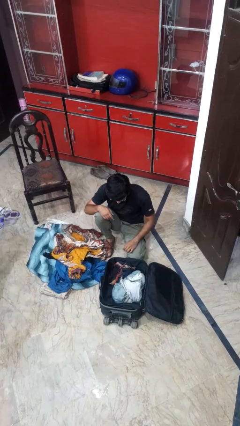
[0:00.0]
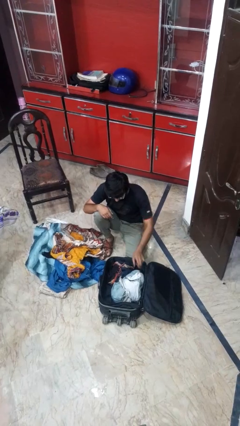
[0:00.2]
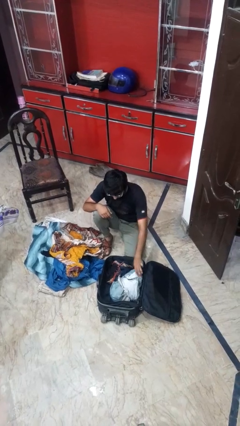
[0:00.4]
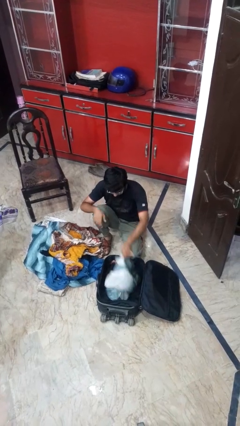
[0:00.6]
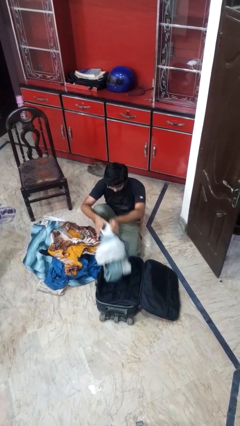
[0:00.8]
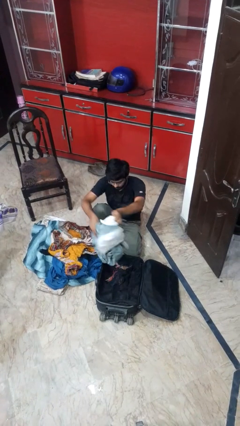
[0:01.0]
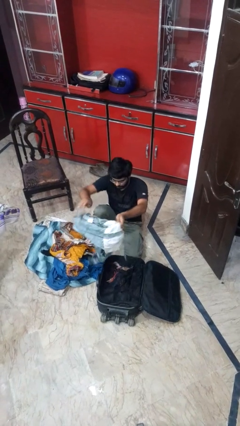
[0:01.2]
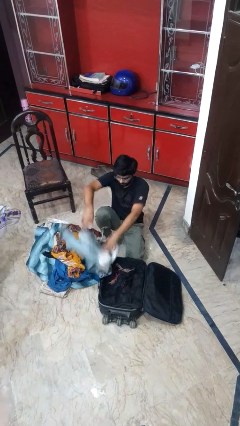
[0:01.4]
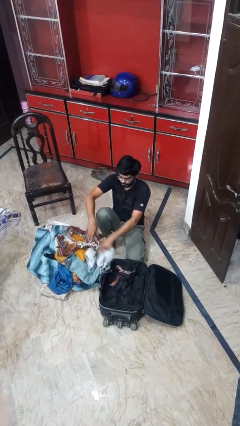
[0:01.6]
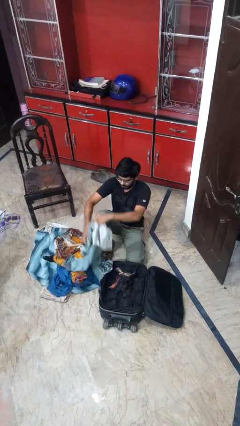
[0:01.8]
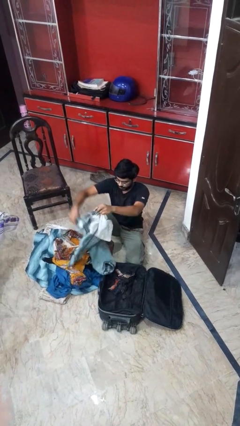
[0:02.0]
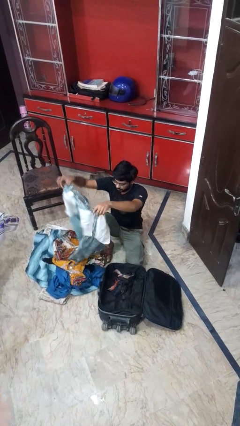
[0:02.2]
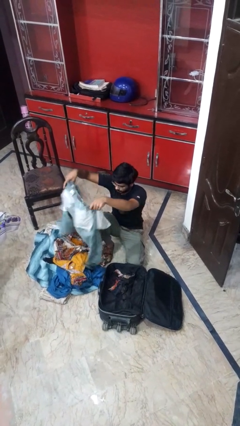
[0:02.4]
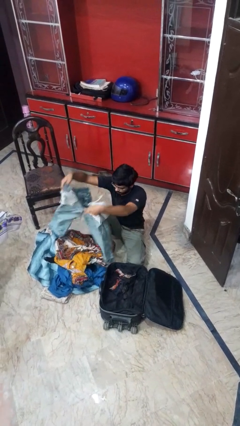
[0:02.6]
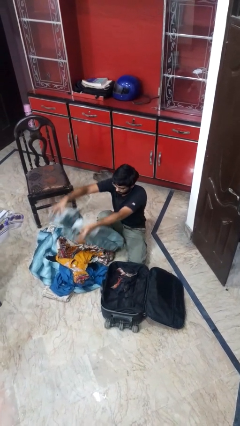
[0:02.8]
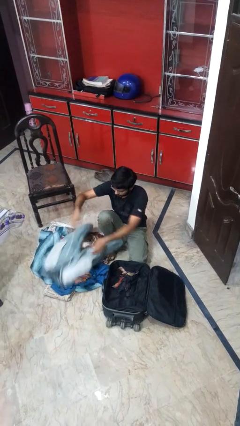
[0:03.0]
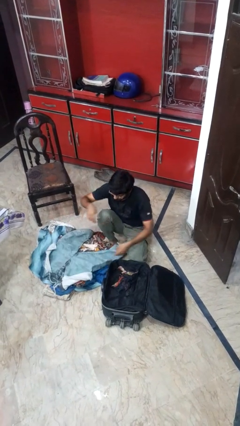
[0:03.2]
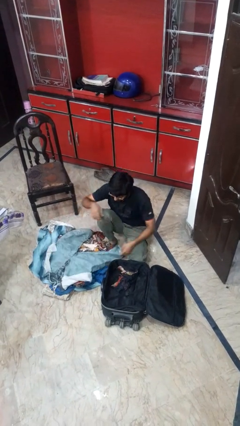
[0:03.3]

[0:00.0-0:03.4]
person unloads clothes from suitcase

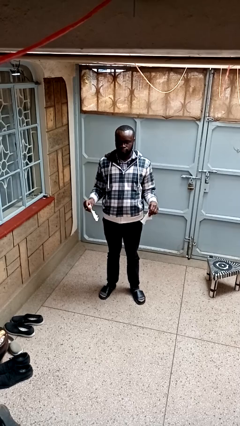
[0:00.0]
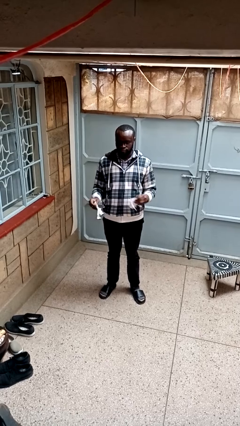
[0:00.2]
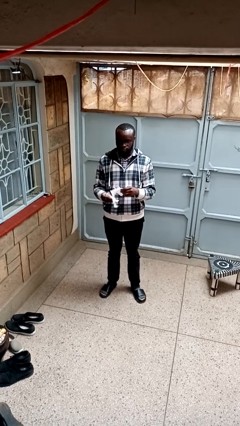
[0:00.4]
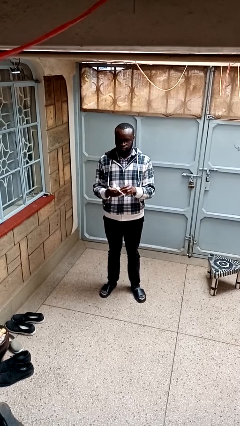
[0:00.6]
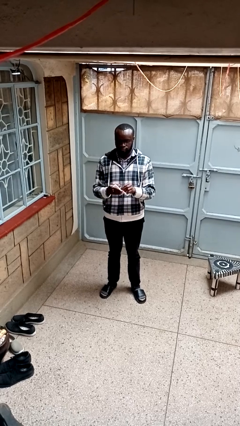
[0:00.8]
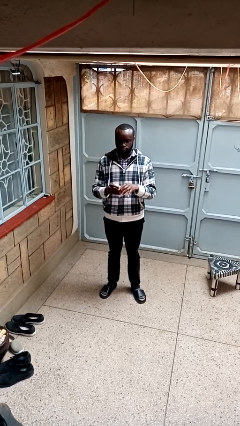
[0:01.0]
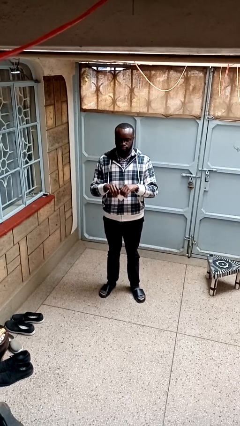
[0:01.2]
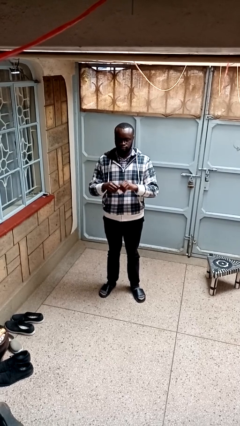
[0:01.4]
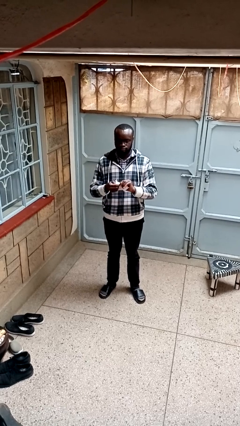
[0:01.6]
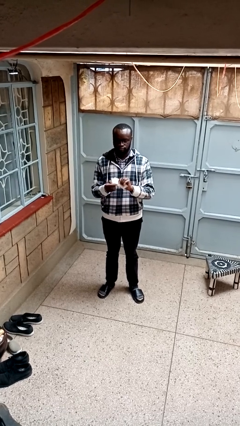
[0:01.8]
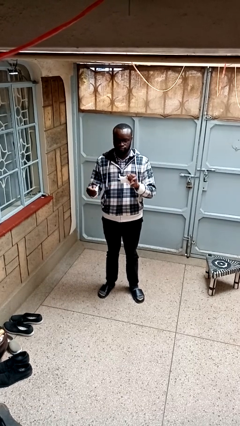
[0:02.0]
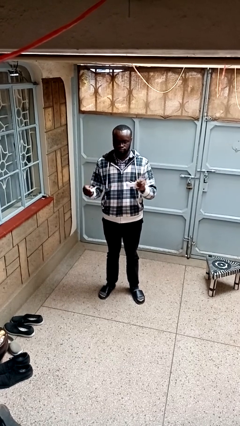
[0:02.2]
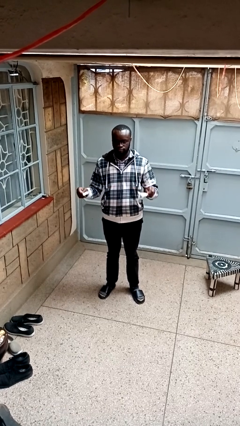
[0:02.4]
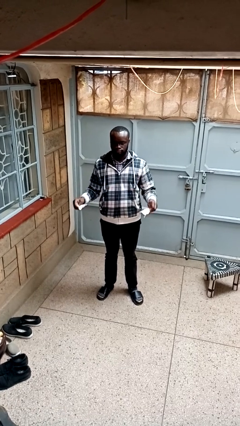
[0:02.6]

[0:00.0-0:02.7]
person tears paper

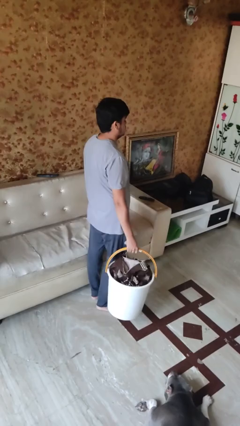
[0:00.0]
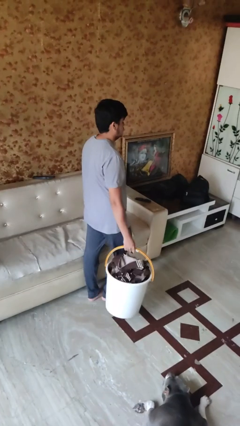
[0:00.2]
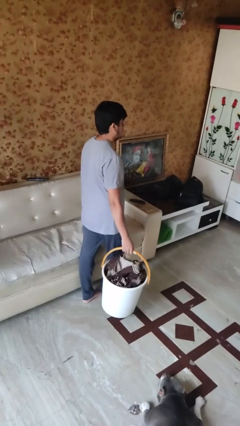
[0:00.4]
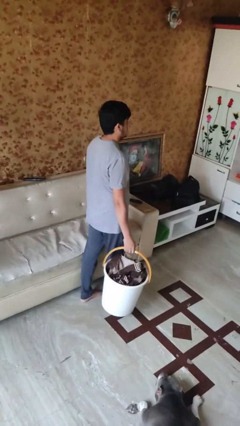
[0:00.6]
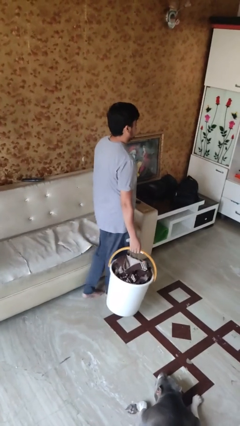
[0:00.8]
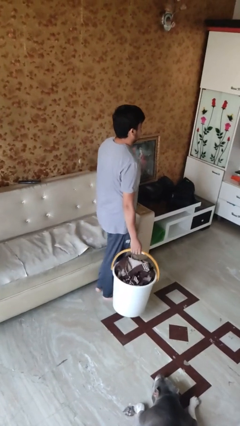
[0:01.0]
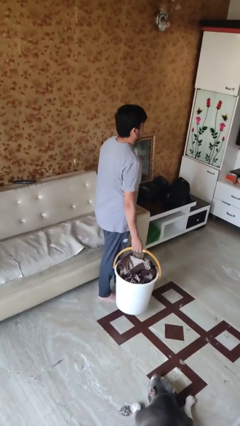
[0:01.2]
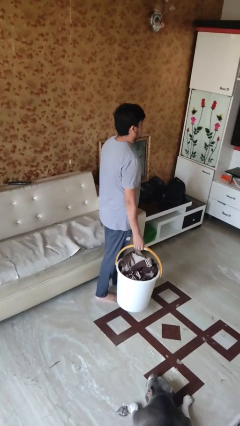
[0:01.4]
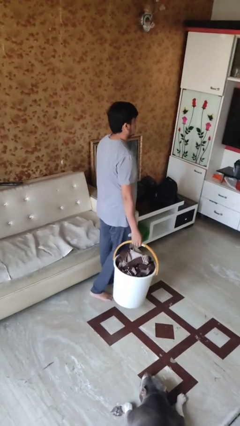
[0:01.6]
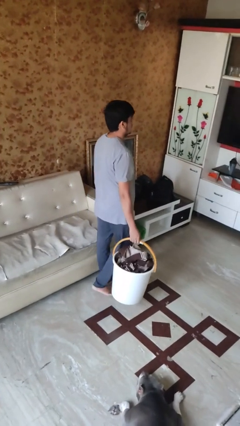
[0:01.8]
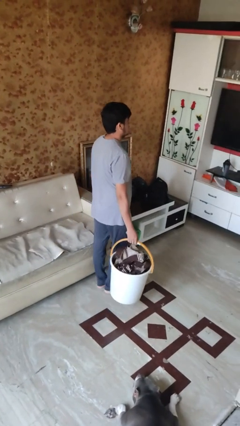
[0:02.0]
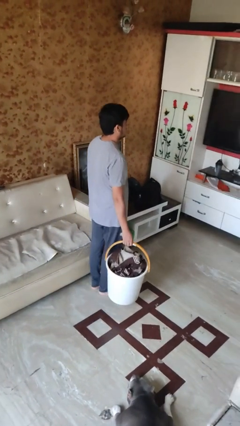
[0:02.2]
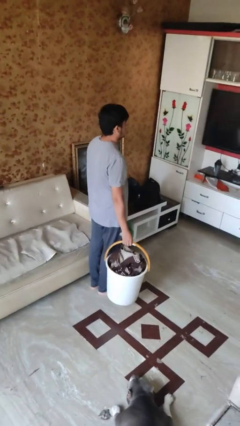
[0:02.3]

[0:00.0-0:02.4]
person carries laundry basket

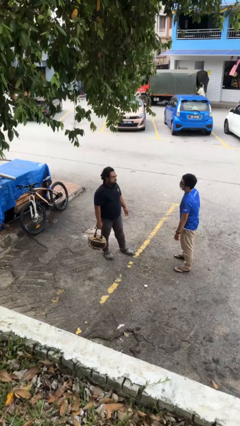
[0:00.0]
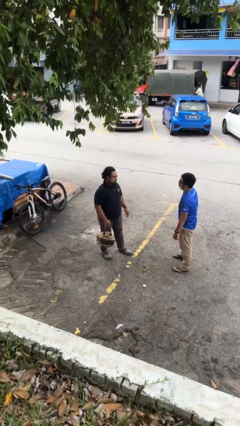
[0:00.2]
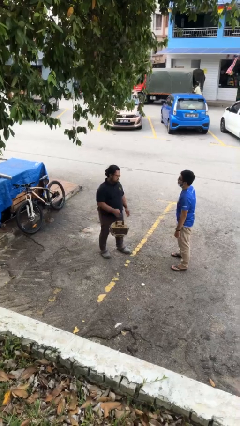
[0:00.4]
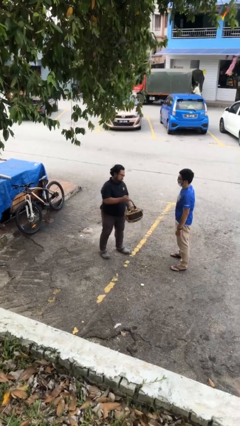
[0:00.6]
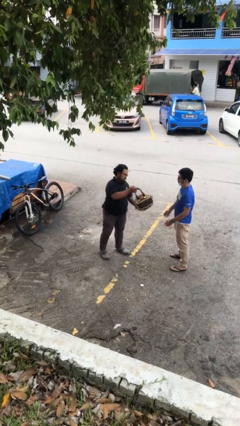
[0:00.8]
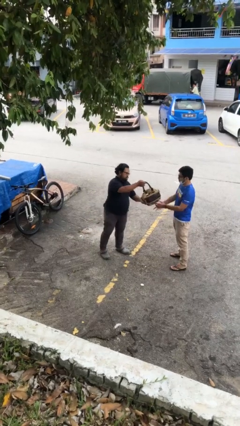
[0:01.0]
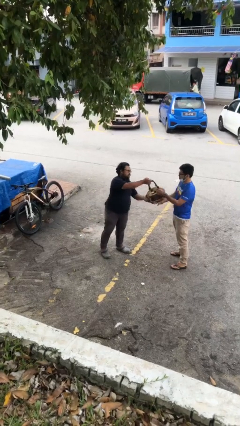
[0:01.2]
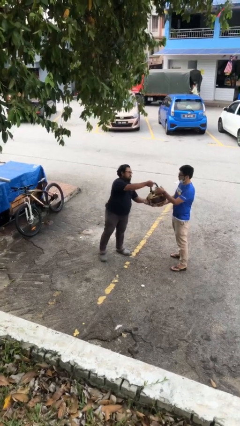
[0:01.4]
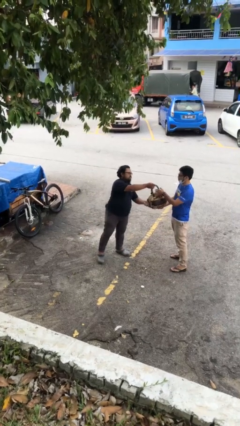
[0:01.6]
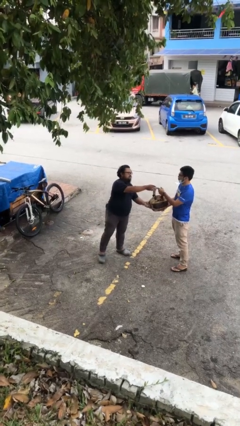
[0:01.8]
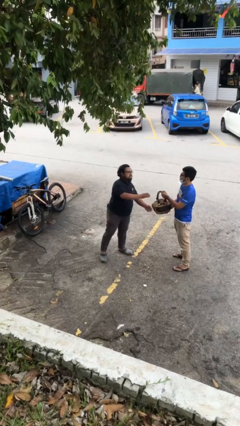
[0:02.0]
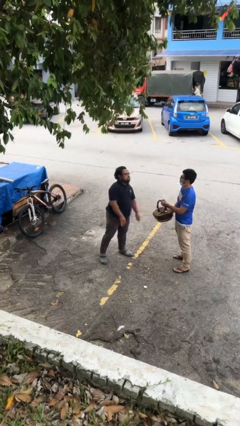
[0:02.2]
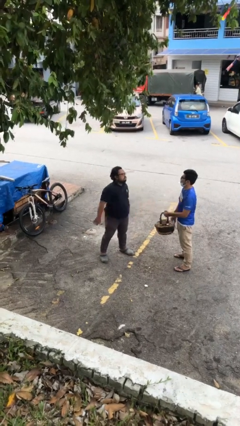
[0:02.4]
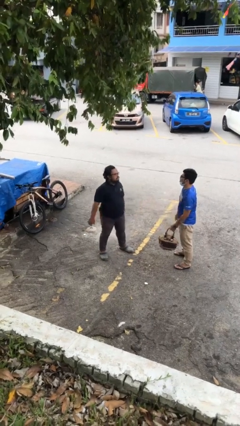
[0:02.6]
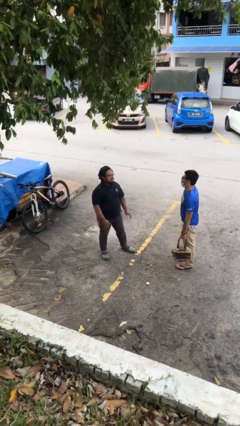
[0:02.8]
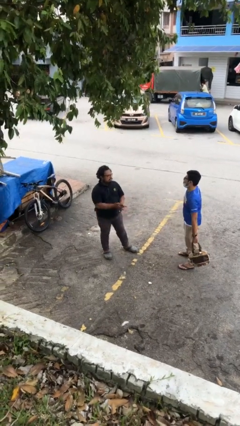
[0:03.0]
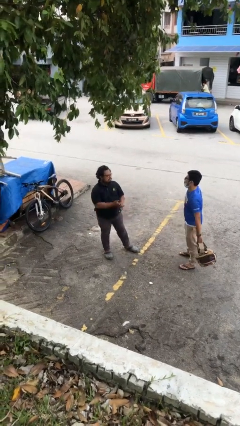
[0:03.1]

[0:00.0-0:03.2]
person transfers object to person

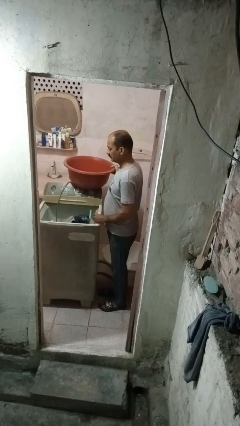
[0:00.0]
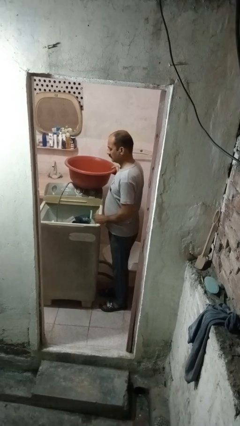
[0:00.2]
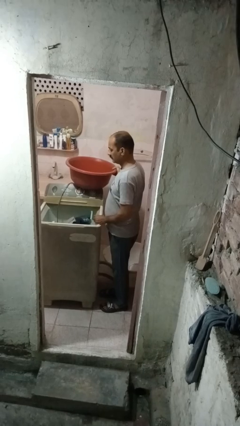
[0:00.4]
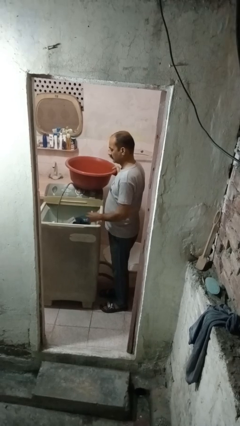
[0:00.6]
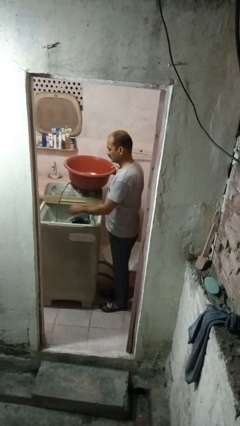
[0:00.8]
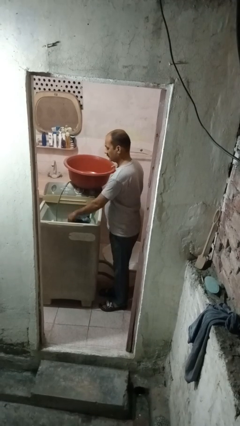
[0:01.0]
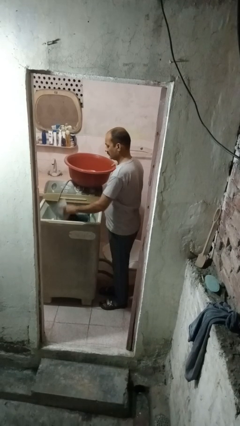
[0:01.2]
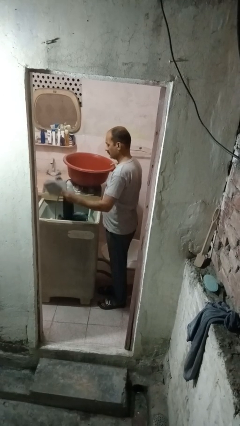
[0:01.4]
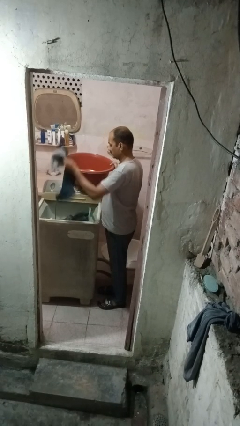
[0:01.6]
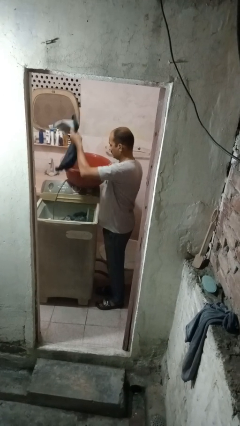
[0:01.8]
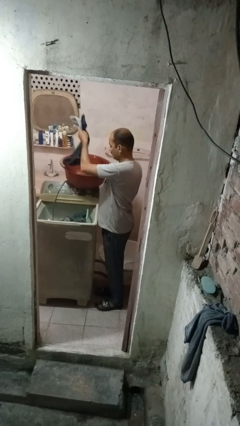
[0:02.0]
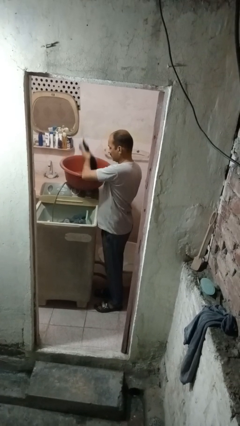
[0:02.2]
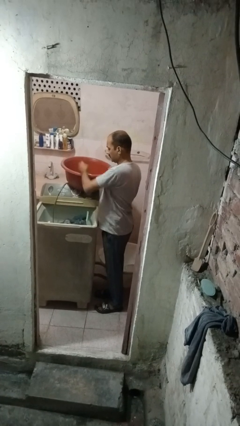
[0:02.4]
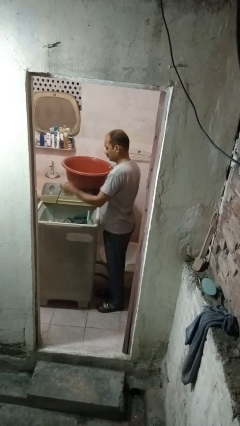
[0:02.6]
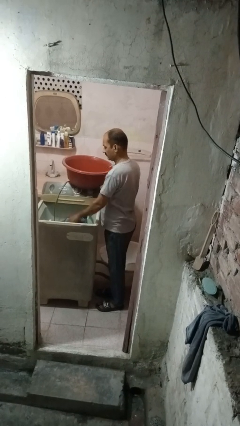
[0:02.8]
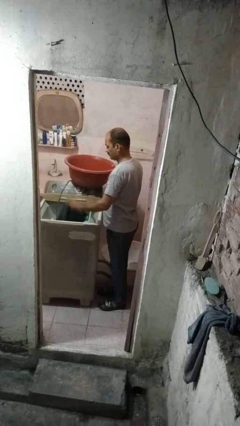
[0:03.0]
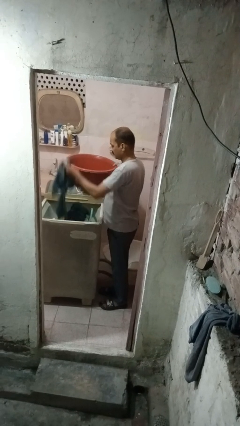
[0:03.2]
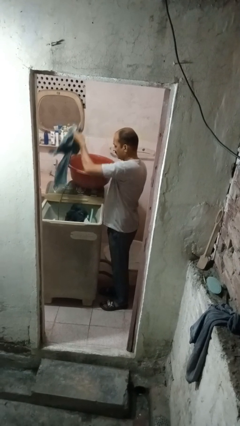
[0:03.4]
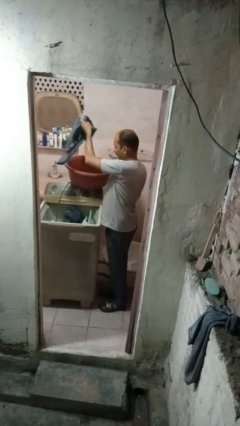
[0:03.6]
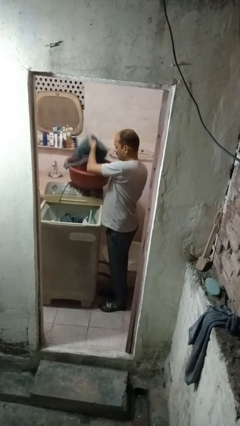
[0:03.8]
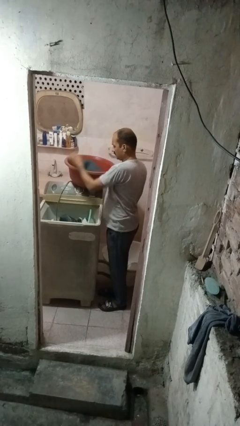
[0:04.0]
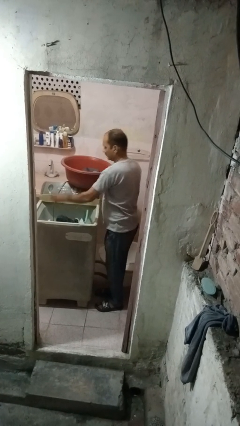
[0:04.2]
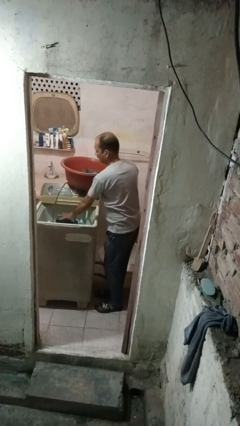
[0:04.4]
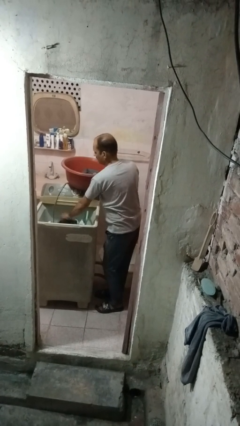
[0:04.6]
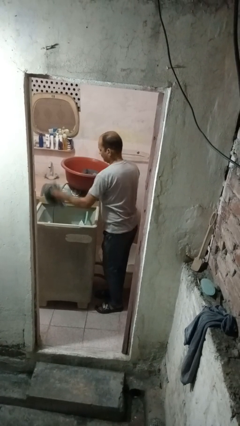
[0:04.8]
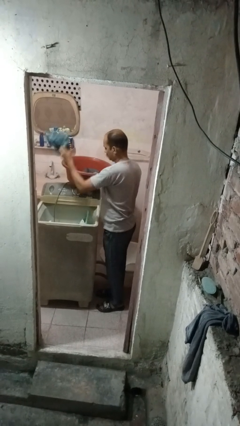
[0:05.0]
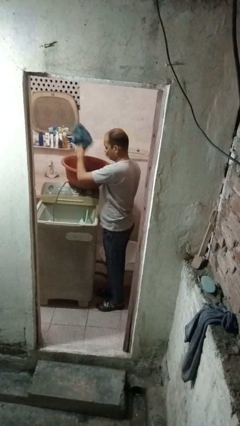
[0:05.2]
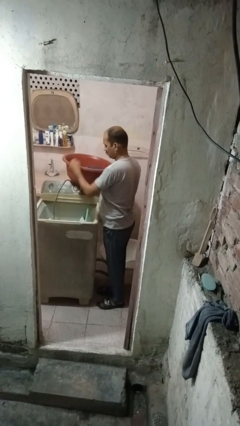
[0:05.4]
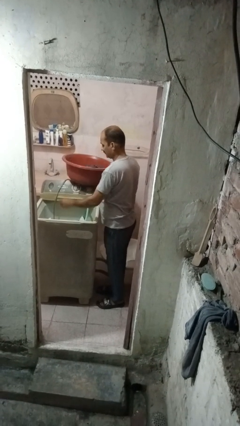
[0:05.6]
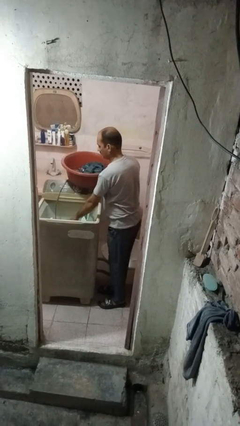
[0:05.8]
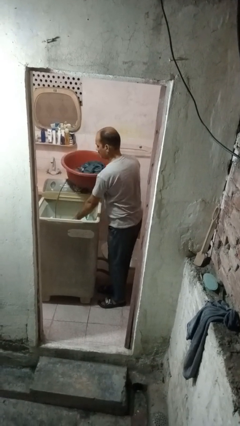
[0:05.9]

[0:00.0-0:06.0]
person unloads dishwasher
